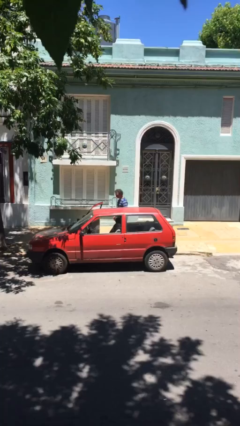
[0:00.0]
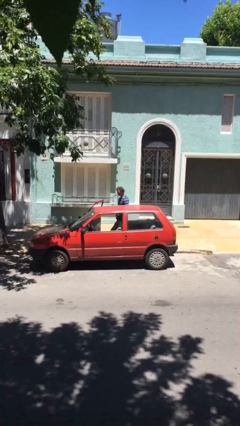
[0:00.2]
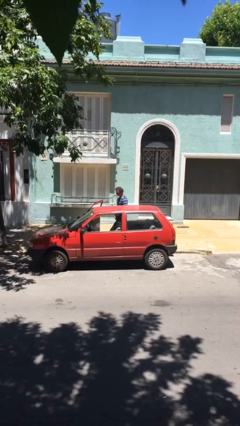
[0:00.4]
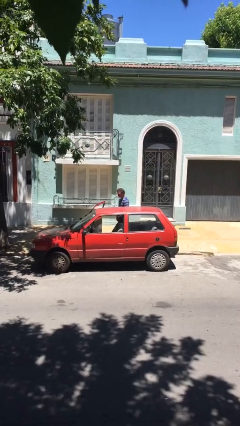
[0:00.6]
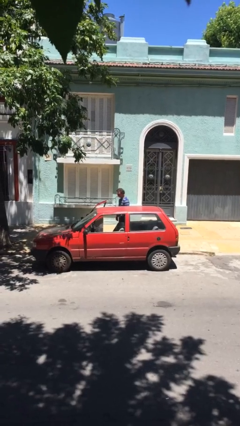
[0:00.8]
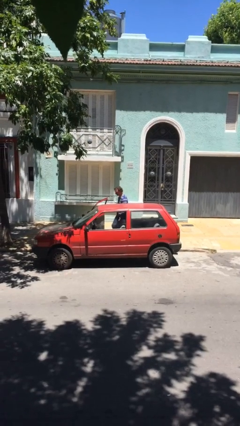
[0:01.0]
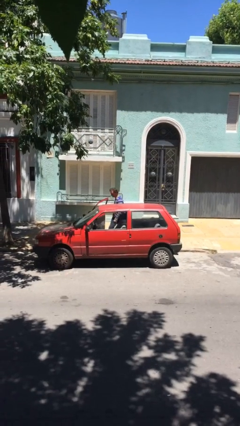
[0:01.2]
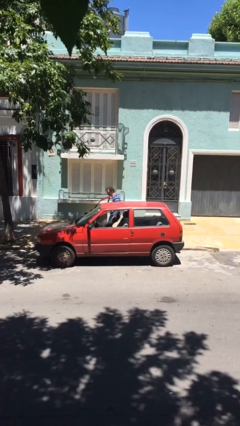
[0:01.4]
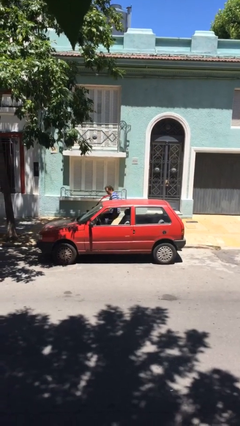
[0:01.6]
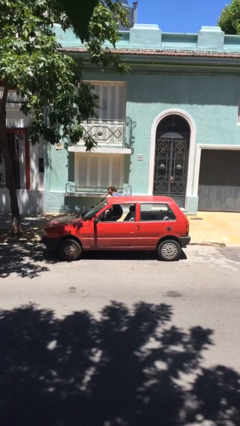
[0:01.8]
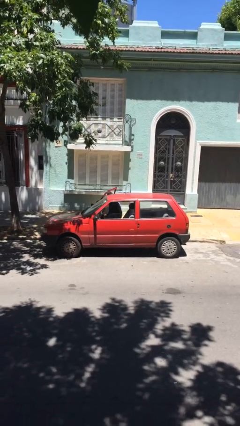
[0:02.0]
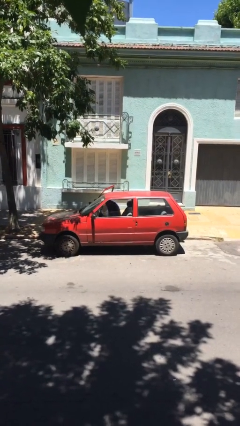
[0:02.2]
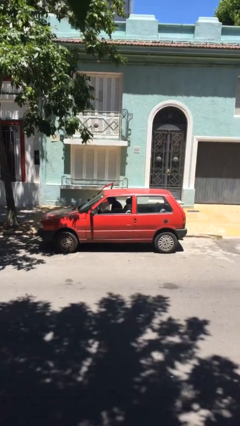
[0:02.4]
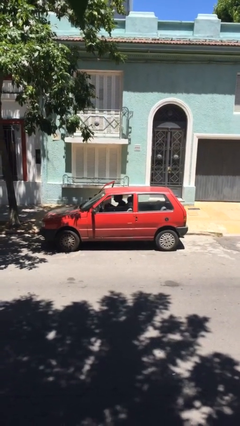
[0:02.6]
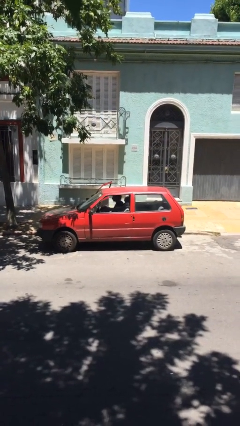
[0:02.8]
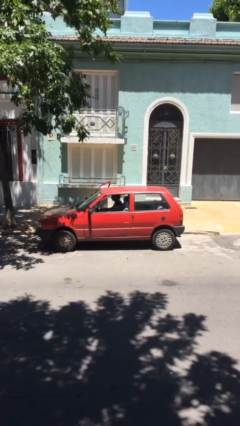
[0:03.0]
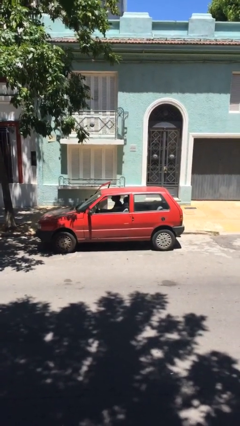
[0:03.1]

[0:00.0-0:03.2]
person enters car

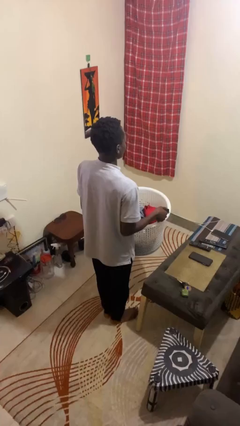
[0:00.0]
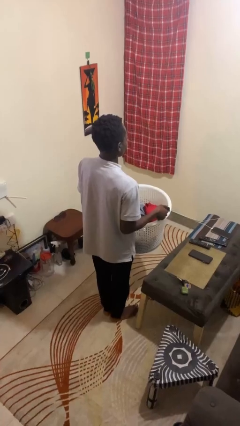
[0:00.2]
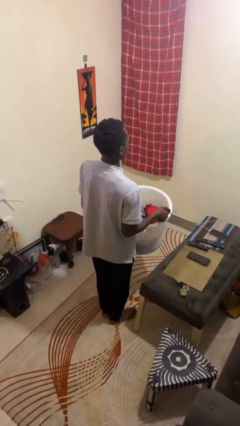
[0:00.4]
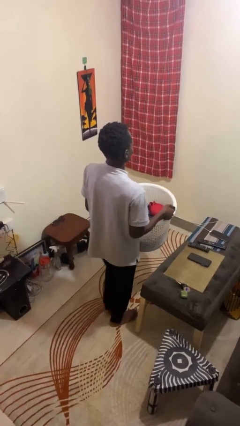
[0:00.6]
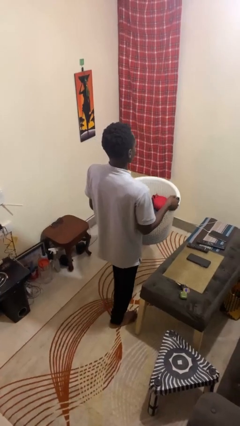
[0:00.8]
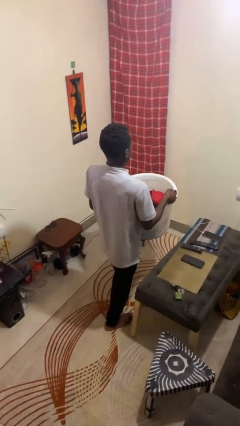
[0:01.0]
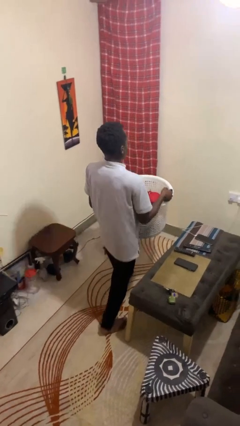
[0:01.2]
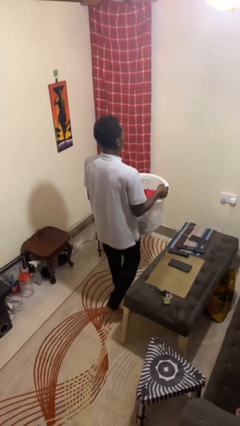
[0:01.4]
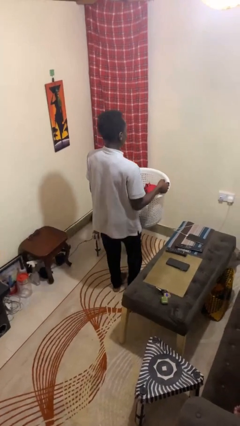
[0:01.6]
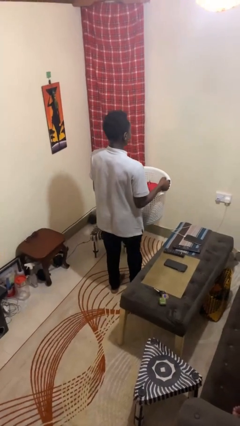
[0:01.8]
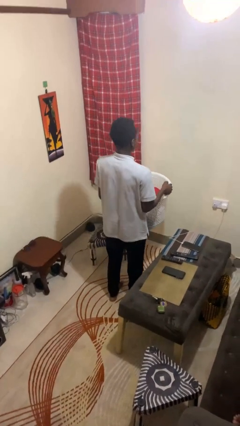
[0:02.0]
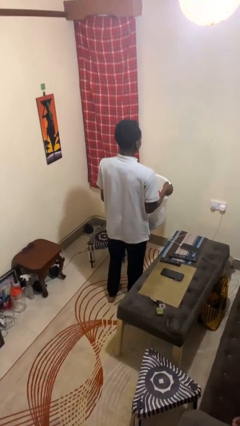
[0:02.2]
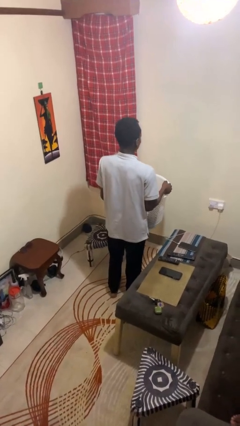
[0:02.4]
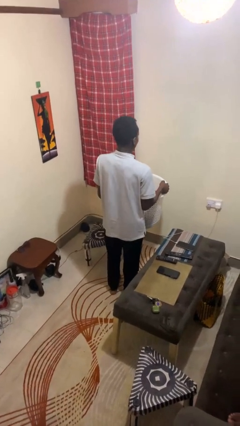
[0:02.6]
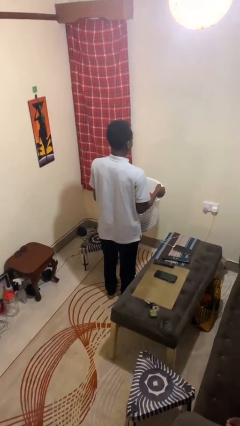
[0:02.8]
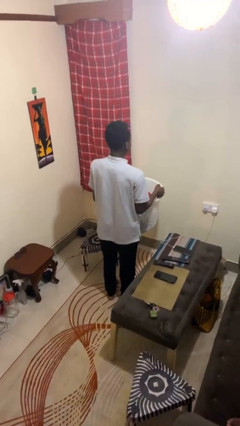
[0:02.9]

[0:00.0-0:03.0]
person carries laundry basket

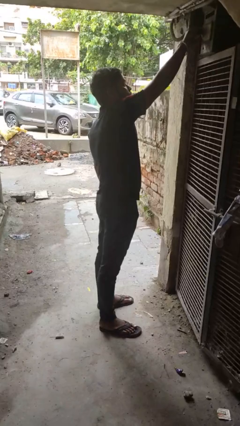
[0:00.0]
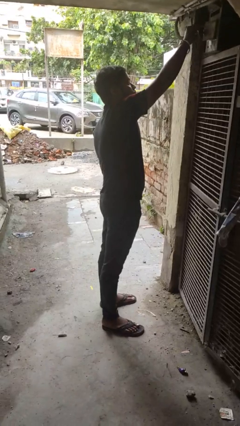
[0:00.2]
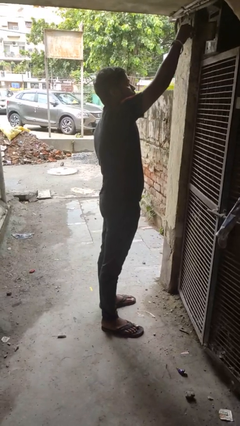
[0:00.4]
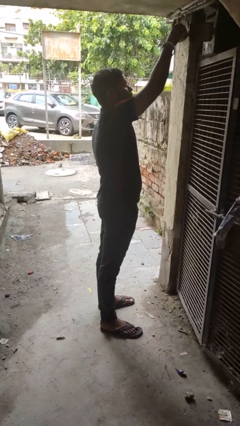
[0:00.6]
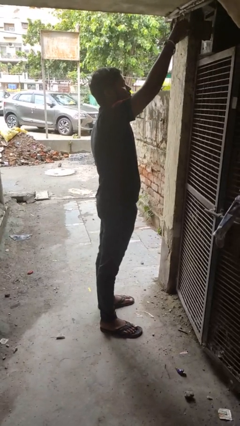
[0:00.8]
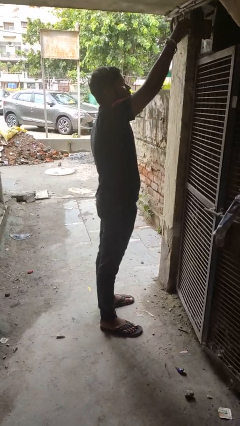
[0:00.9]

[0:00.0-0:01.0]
person opens mailbox

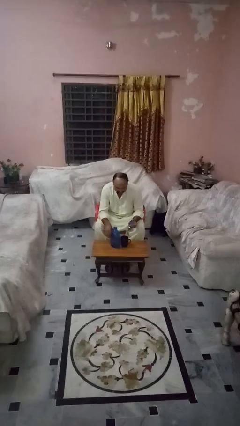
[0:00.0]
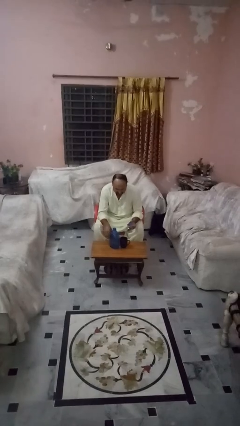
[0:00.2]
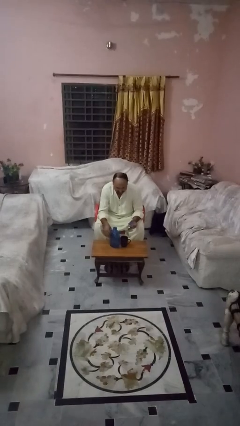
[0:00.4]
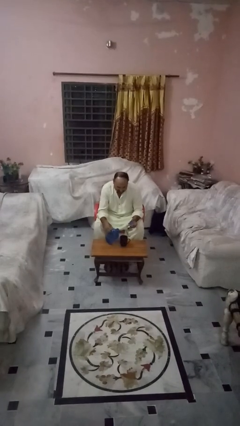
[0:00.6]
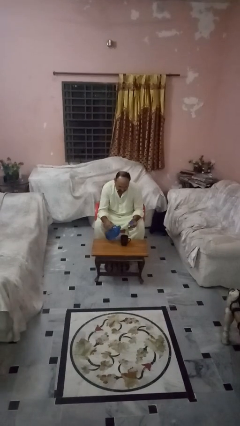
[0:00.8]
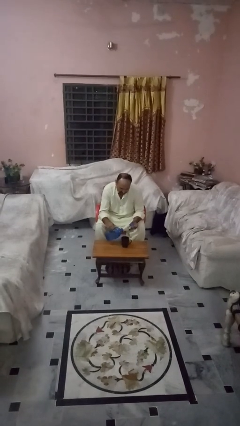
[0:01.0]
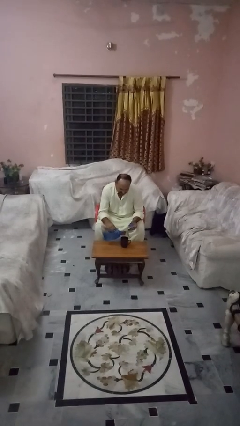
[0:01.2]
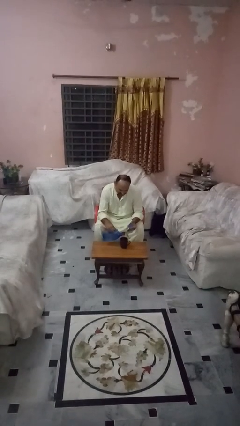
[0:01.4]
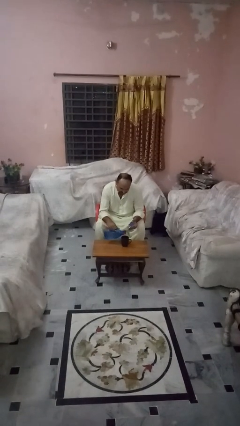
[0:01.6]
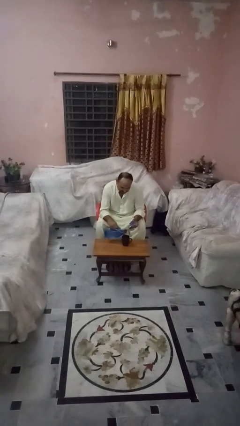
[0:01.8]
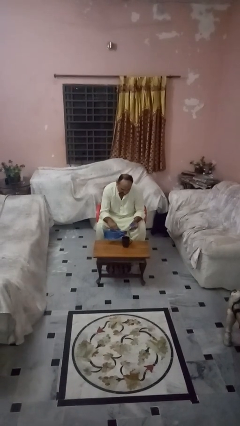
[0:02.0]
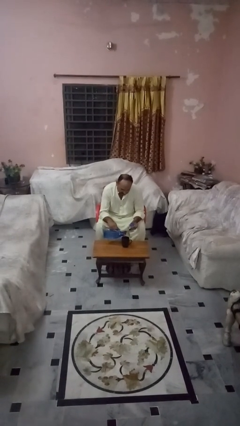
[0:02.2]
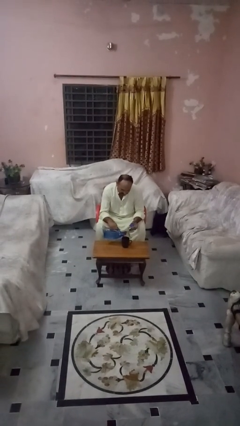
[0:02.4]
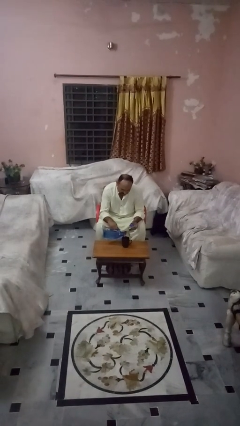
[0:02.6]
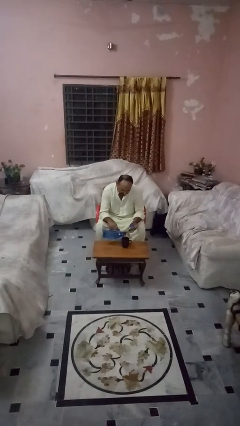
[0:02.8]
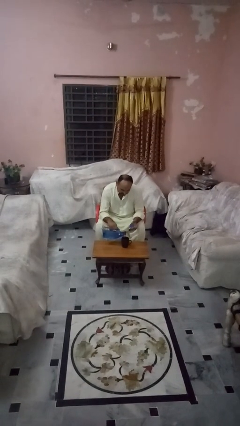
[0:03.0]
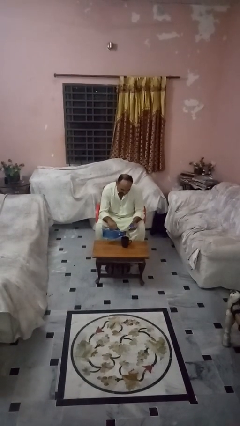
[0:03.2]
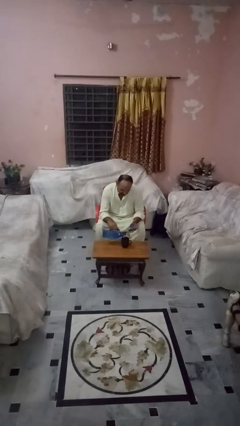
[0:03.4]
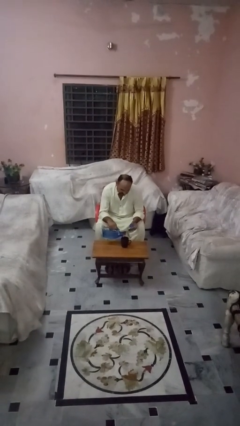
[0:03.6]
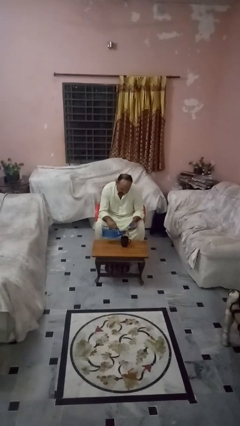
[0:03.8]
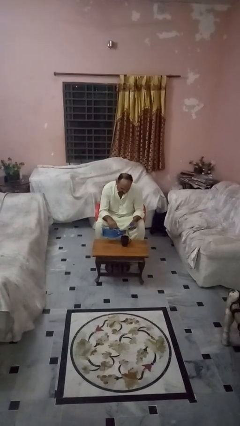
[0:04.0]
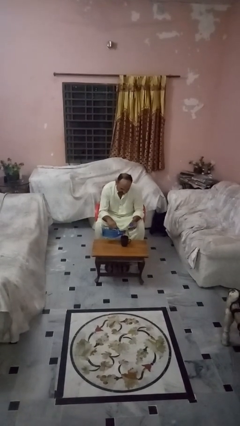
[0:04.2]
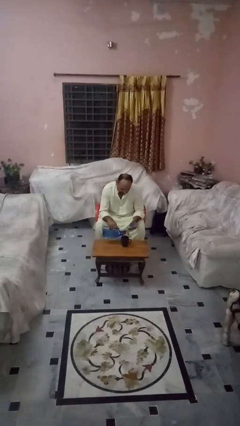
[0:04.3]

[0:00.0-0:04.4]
person pours liquid into cup

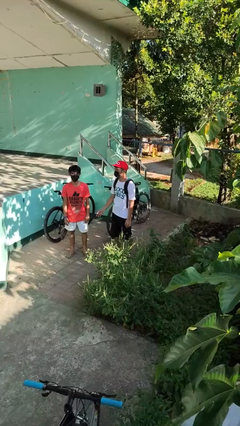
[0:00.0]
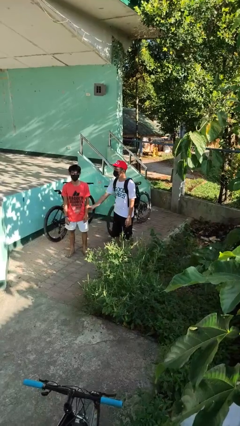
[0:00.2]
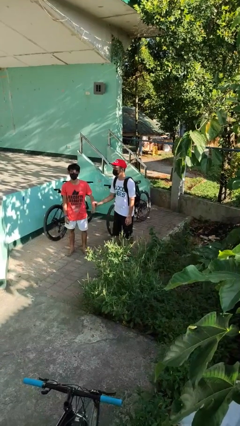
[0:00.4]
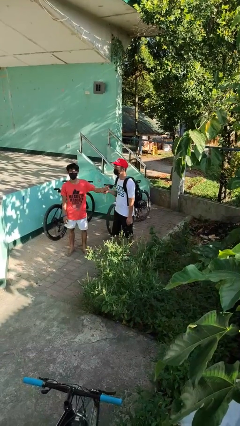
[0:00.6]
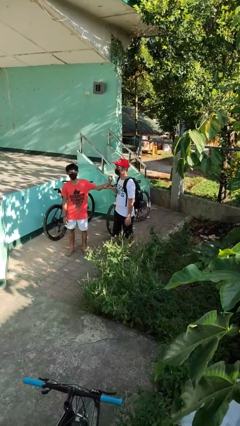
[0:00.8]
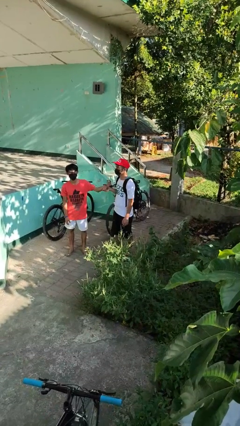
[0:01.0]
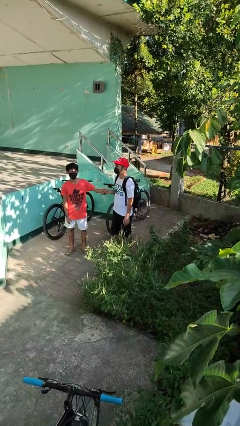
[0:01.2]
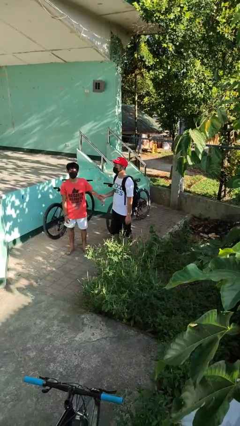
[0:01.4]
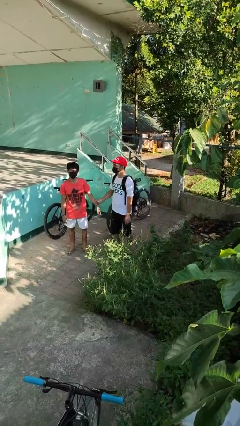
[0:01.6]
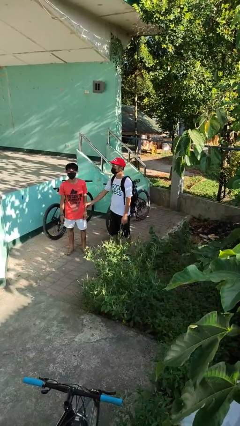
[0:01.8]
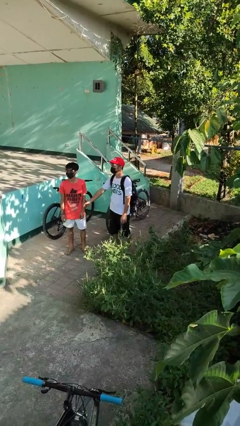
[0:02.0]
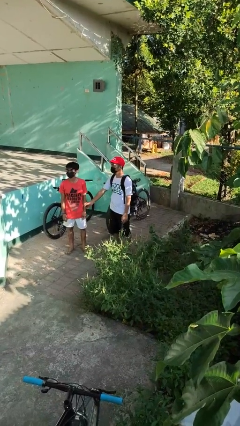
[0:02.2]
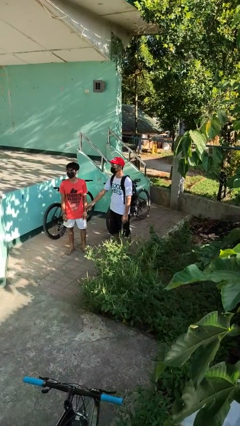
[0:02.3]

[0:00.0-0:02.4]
person grabs person by forearm

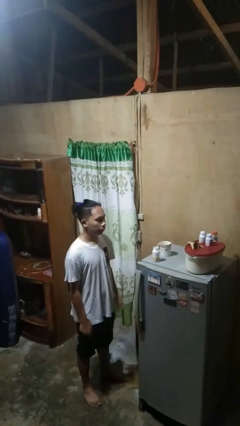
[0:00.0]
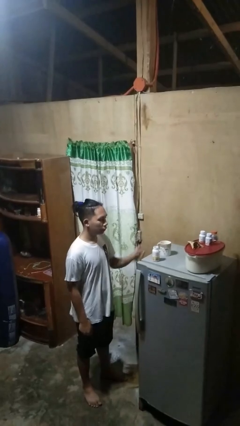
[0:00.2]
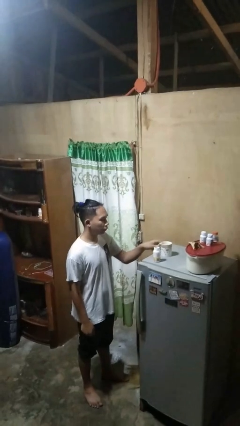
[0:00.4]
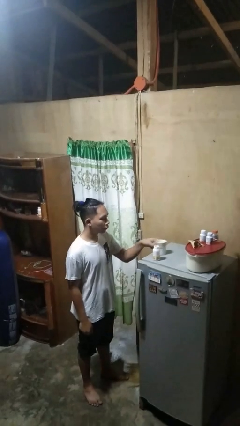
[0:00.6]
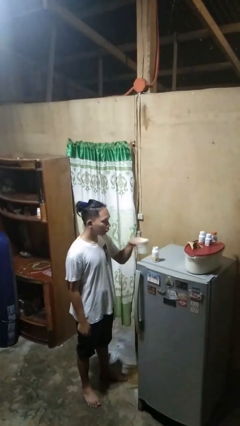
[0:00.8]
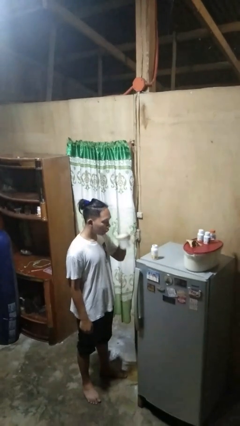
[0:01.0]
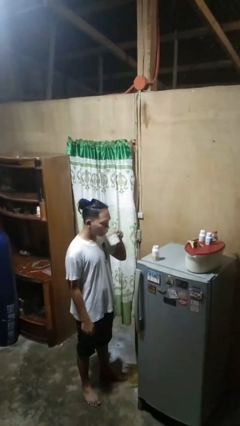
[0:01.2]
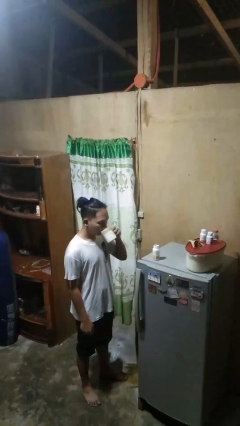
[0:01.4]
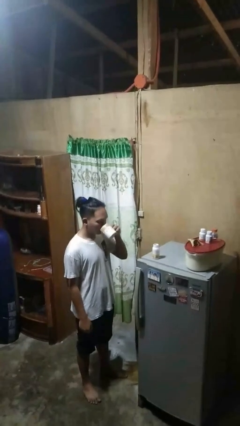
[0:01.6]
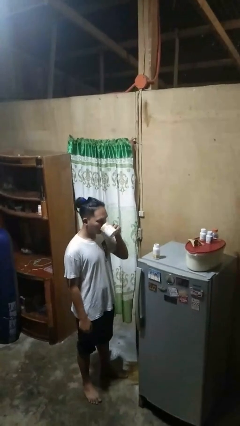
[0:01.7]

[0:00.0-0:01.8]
person drinks from cup

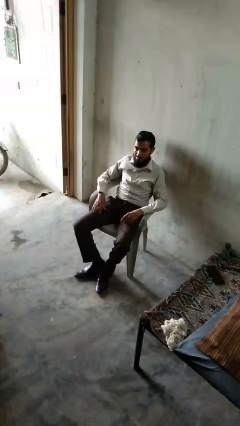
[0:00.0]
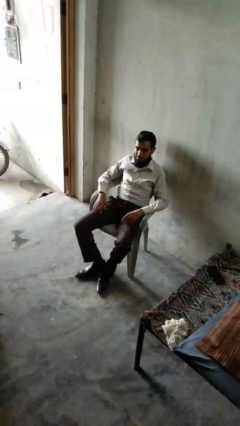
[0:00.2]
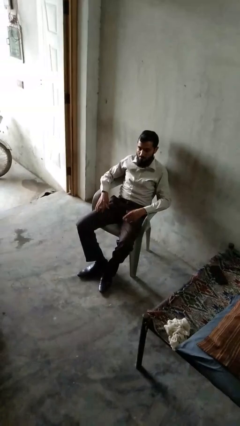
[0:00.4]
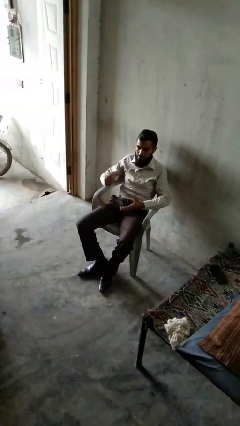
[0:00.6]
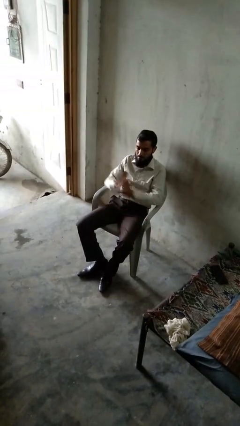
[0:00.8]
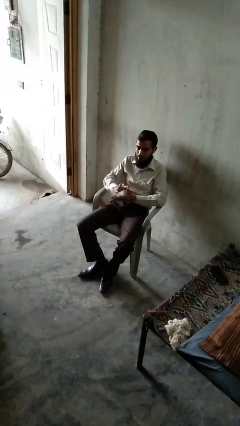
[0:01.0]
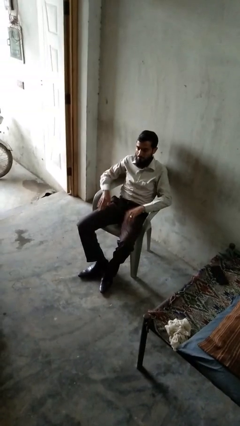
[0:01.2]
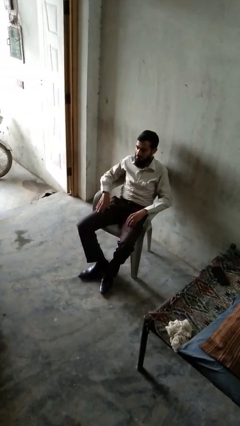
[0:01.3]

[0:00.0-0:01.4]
person claps hands
